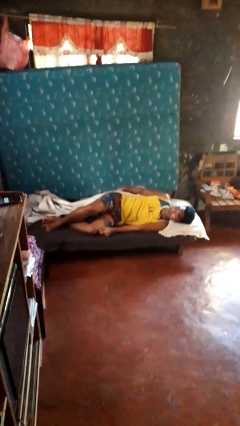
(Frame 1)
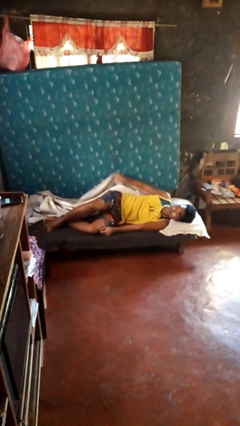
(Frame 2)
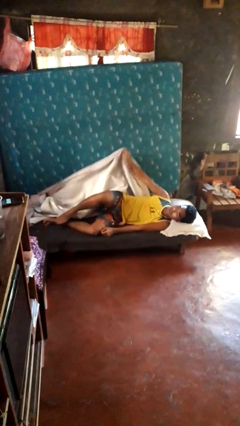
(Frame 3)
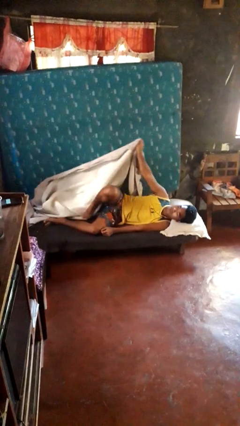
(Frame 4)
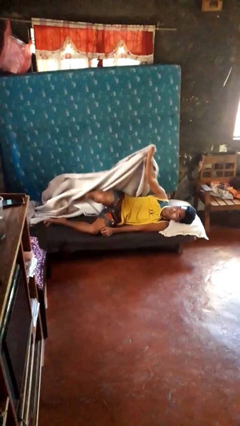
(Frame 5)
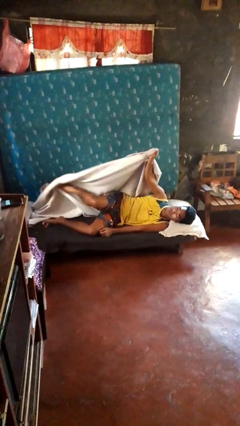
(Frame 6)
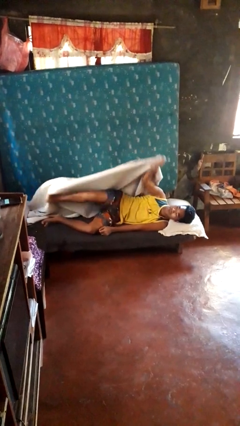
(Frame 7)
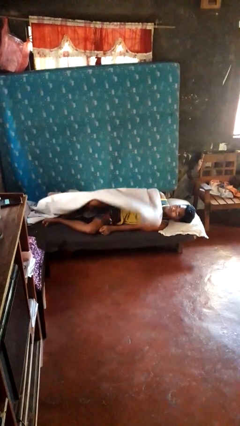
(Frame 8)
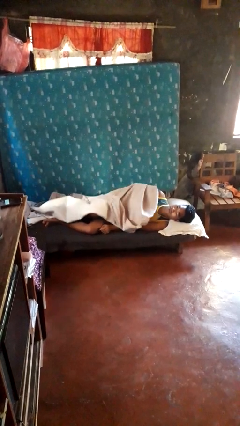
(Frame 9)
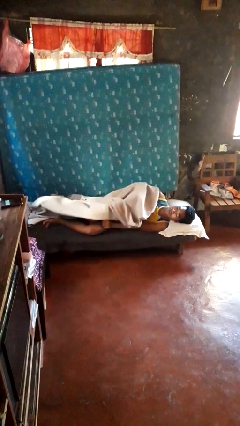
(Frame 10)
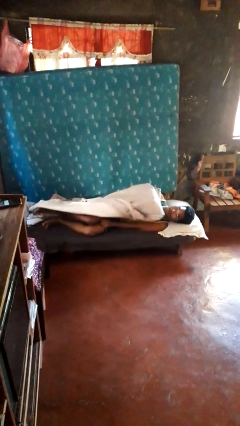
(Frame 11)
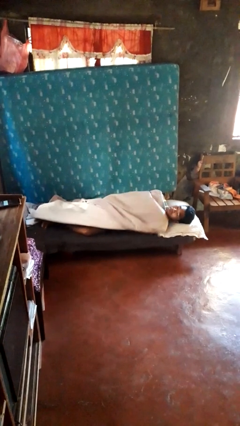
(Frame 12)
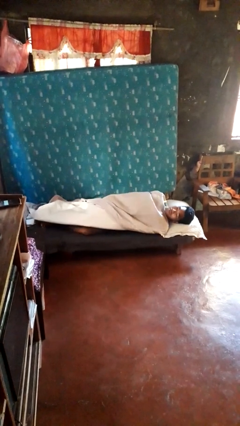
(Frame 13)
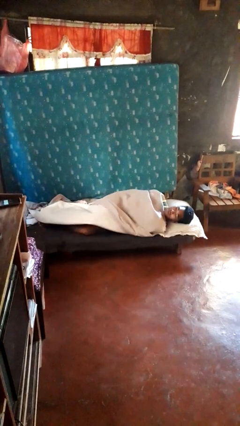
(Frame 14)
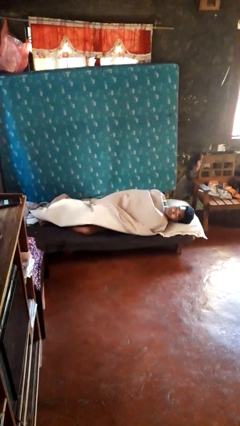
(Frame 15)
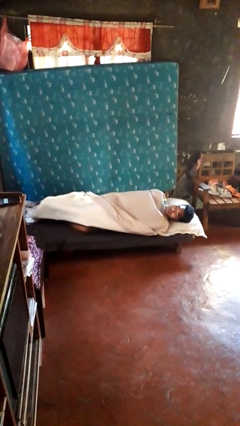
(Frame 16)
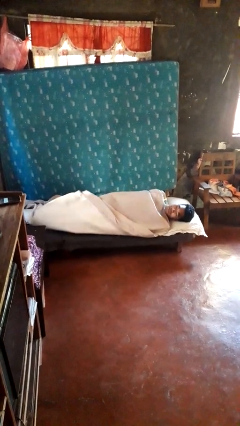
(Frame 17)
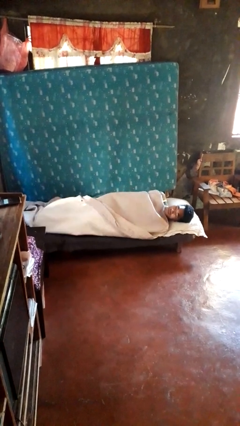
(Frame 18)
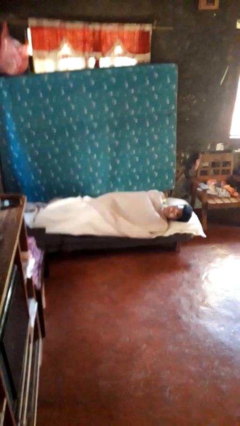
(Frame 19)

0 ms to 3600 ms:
person covers with bedsheets

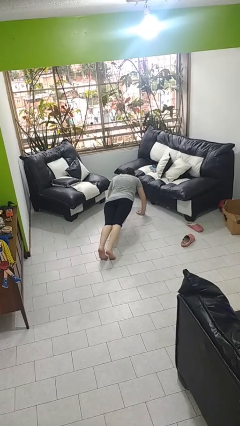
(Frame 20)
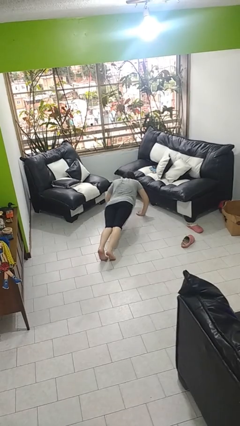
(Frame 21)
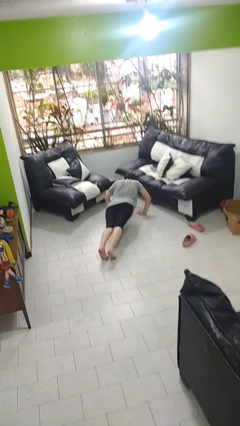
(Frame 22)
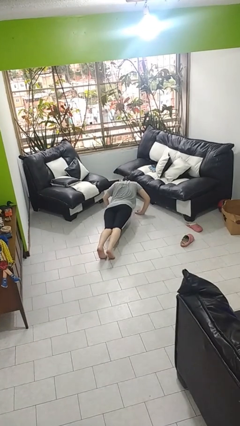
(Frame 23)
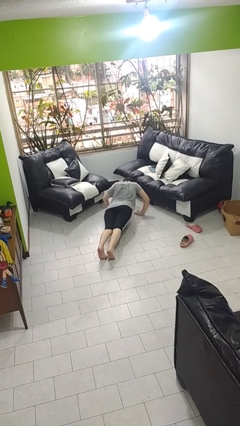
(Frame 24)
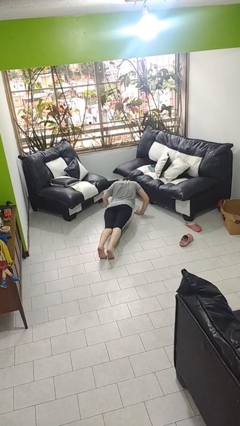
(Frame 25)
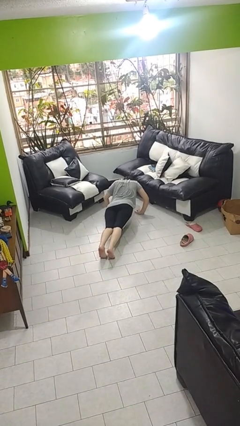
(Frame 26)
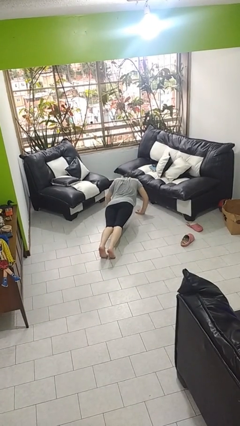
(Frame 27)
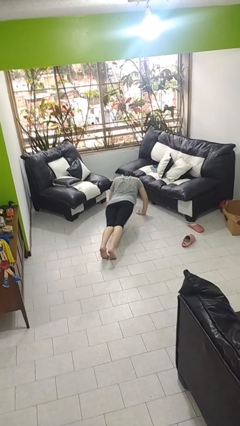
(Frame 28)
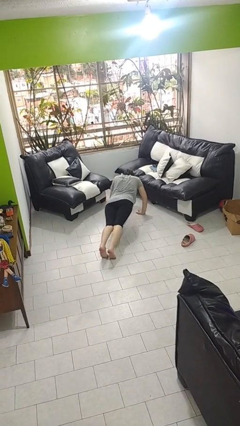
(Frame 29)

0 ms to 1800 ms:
person exercises with pushup

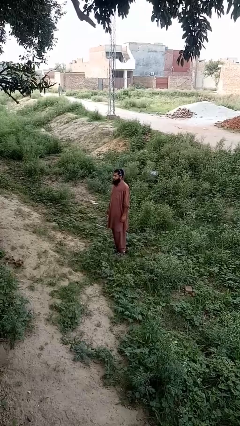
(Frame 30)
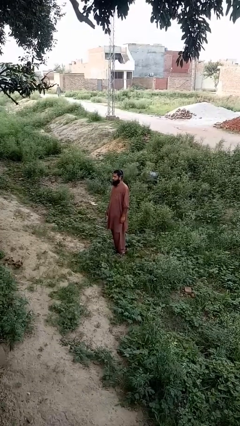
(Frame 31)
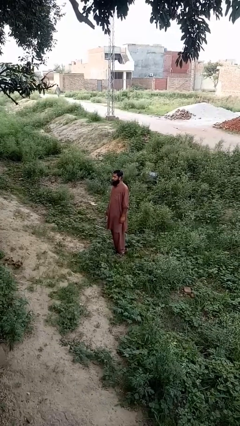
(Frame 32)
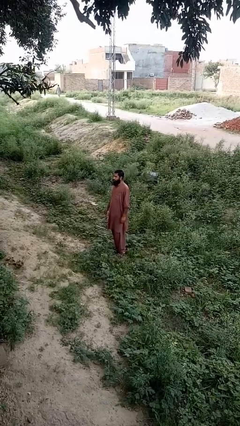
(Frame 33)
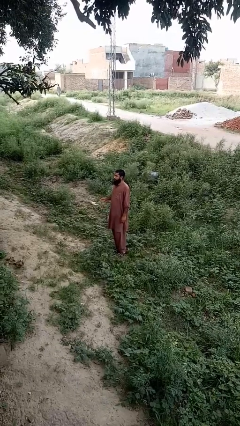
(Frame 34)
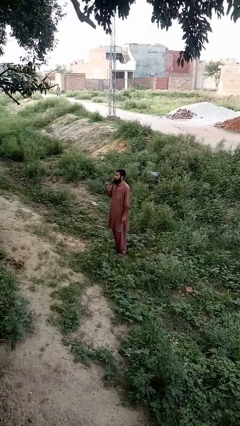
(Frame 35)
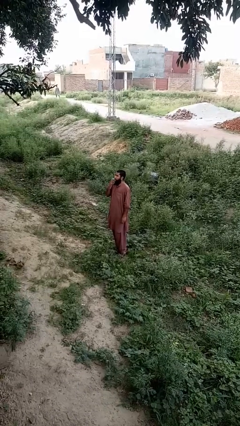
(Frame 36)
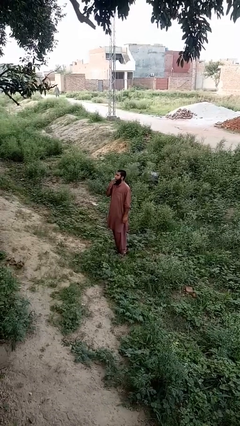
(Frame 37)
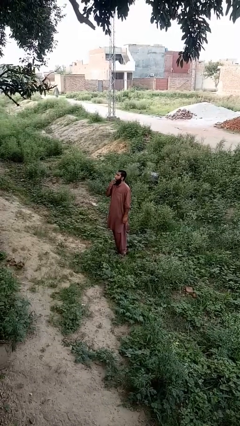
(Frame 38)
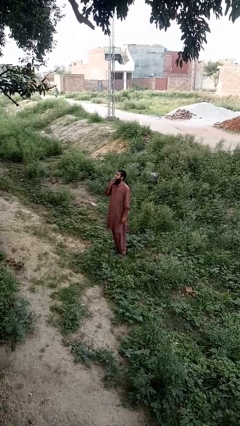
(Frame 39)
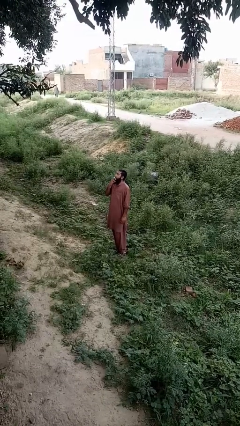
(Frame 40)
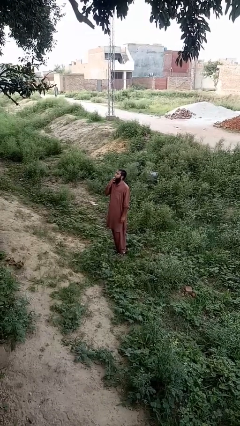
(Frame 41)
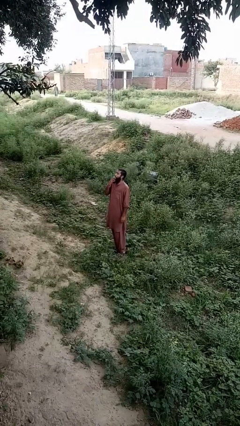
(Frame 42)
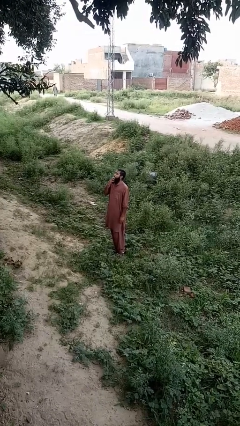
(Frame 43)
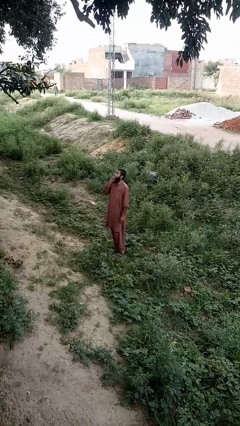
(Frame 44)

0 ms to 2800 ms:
person vapes

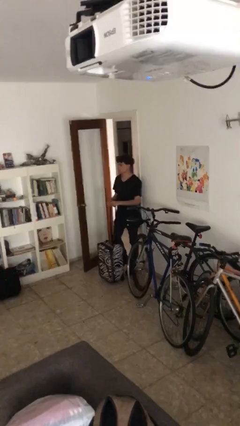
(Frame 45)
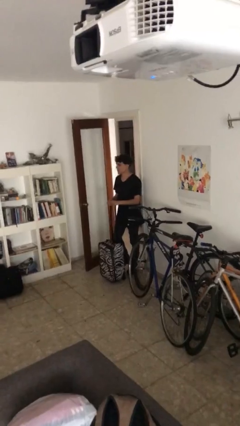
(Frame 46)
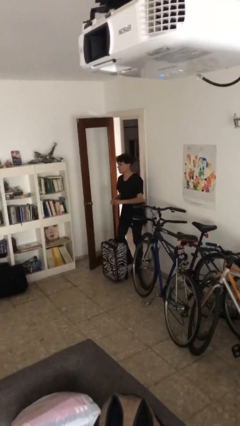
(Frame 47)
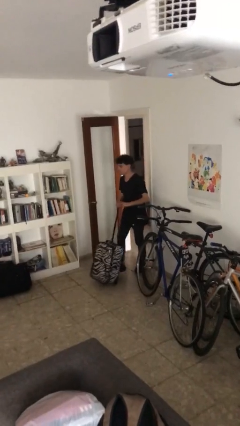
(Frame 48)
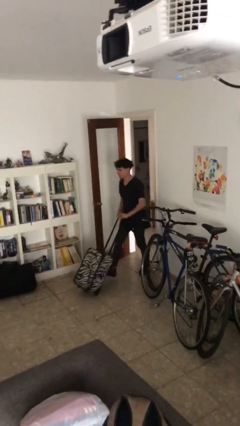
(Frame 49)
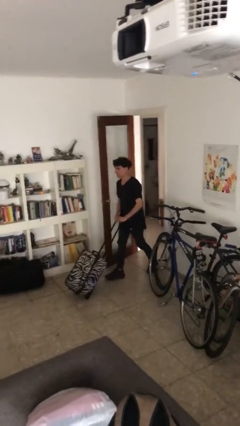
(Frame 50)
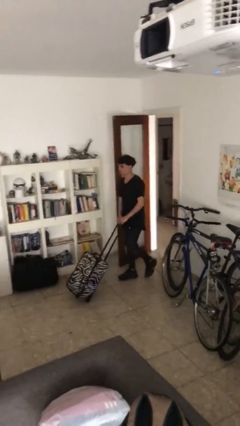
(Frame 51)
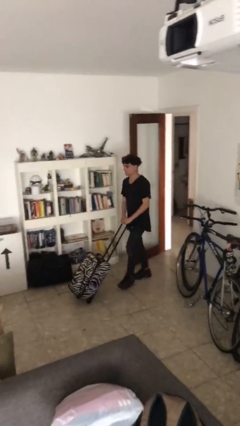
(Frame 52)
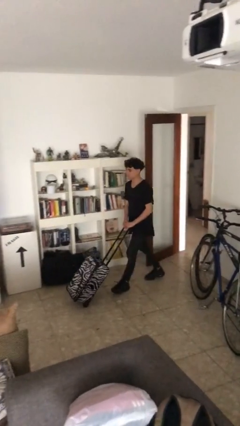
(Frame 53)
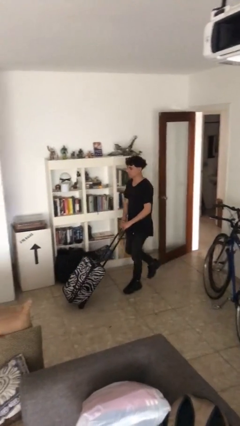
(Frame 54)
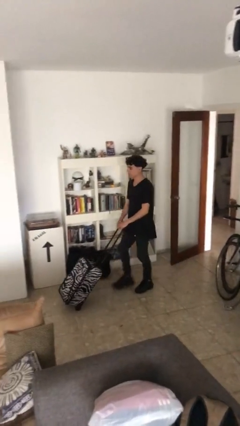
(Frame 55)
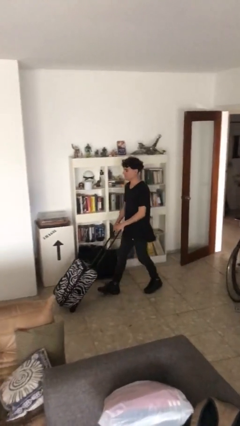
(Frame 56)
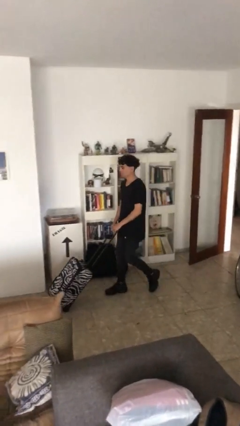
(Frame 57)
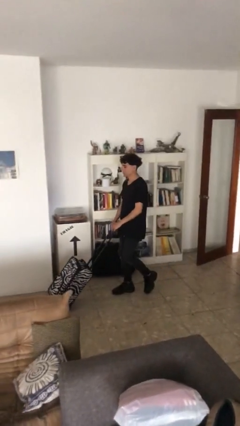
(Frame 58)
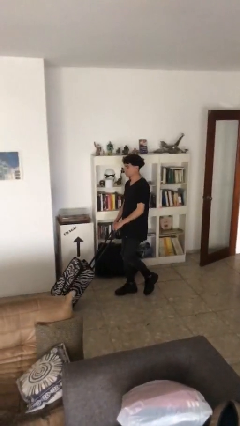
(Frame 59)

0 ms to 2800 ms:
person pushes wheeled cart

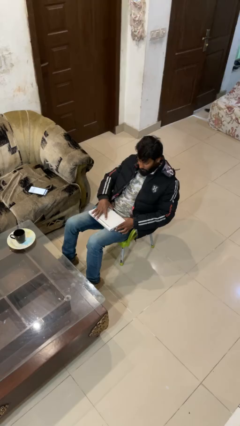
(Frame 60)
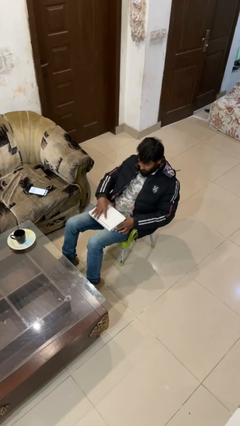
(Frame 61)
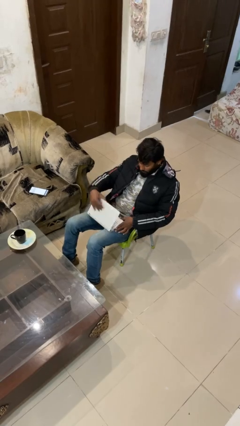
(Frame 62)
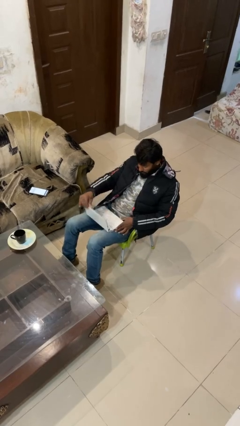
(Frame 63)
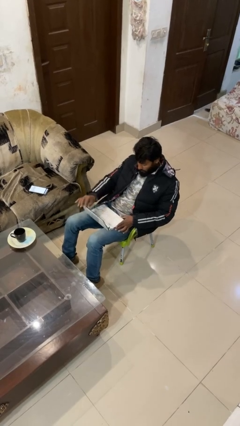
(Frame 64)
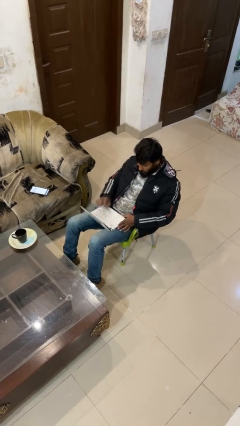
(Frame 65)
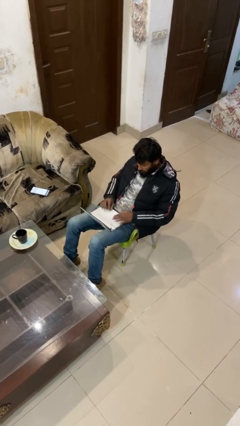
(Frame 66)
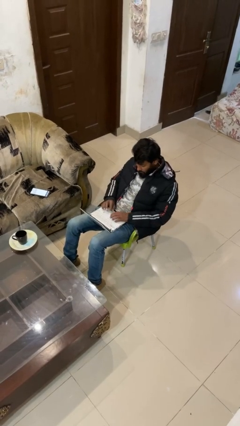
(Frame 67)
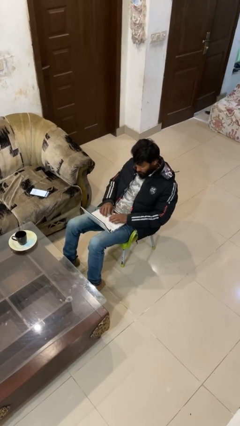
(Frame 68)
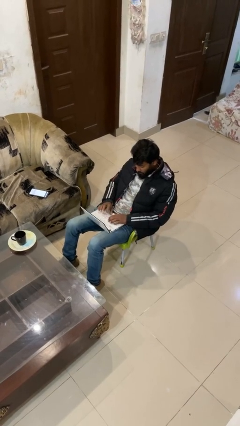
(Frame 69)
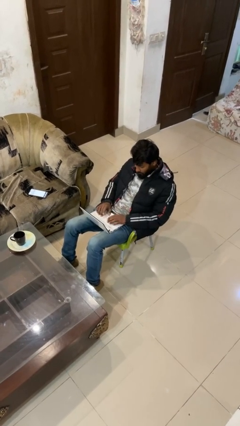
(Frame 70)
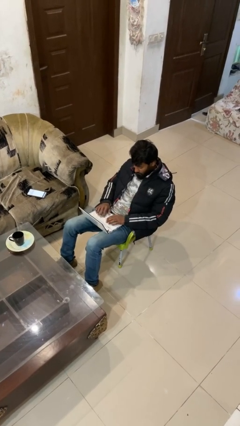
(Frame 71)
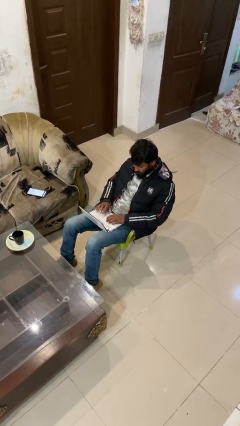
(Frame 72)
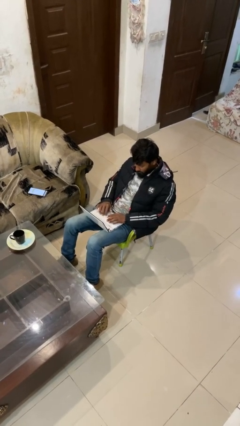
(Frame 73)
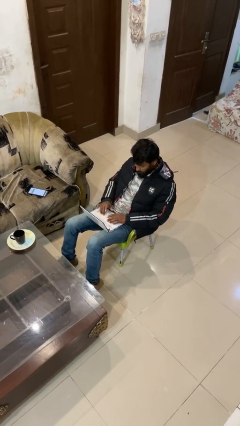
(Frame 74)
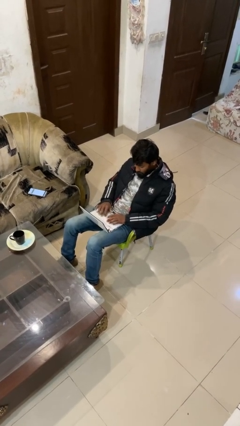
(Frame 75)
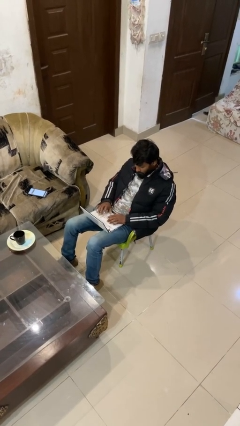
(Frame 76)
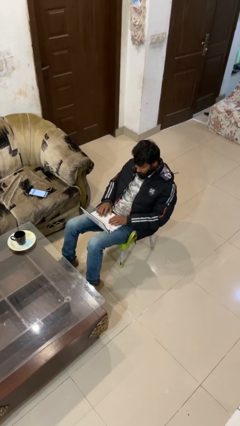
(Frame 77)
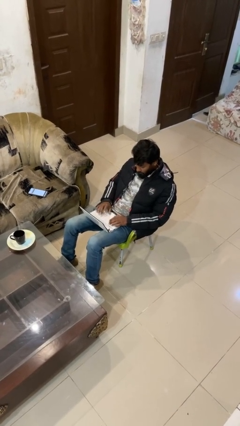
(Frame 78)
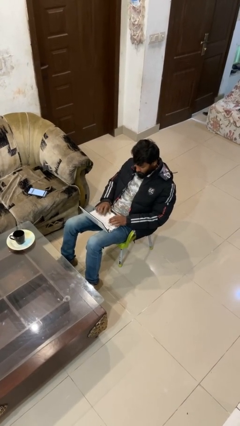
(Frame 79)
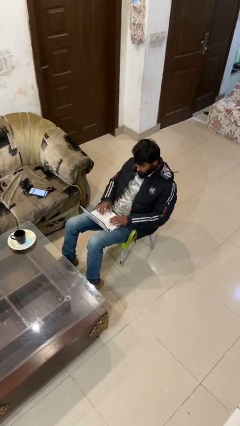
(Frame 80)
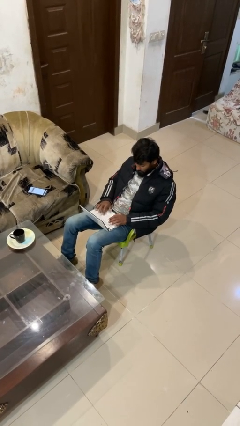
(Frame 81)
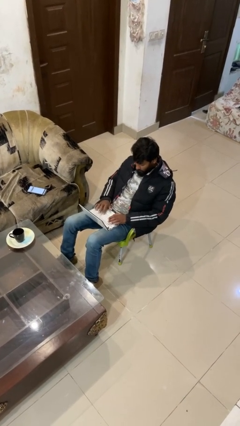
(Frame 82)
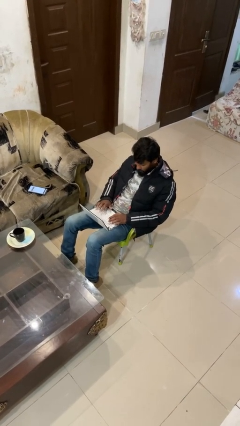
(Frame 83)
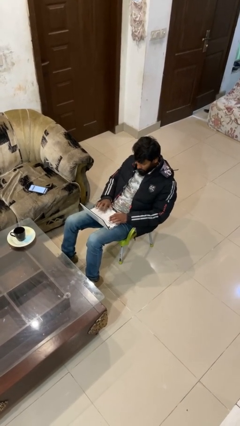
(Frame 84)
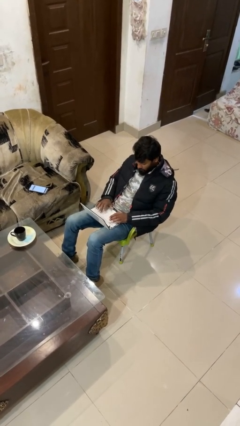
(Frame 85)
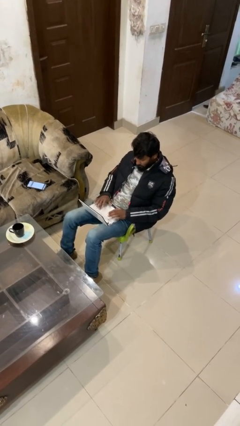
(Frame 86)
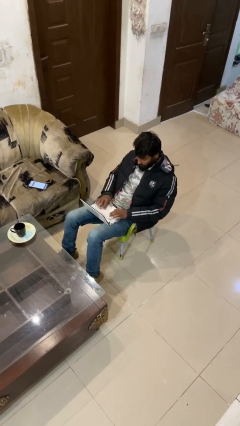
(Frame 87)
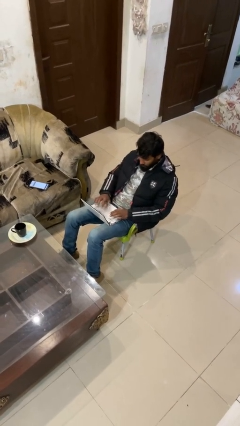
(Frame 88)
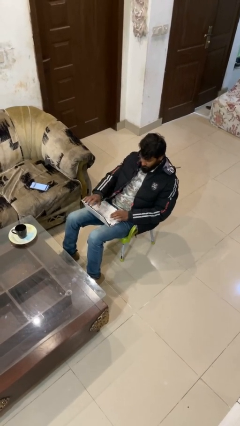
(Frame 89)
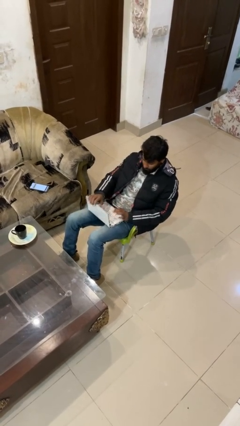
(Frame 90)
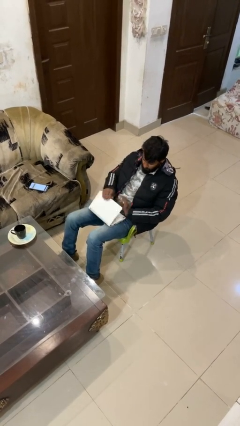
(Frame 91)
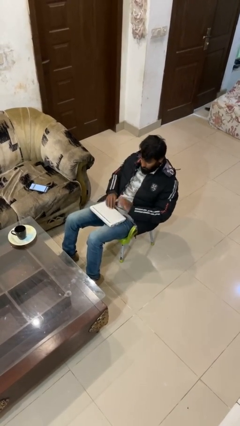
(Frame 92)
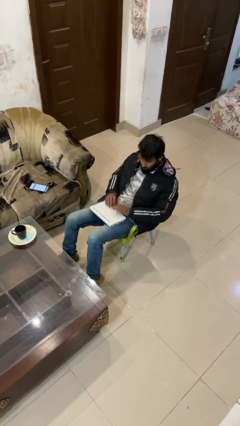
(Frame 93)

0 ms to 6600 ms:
person interacts with laptop
